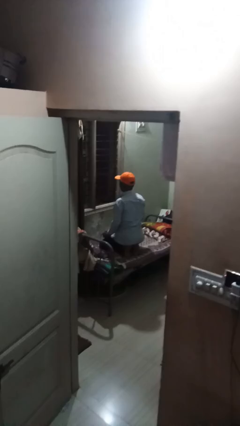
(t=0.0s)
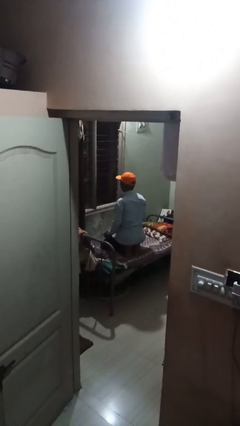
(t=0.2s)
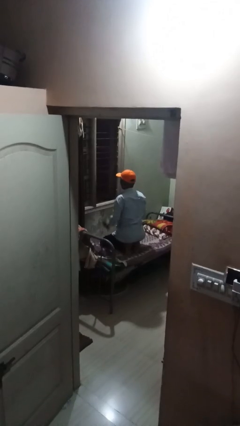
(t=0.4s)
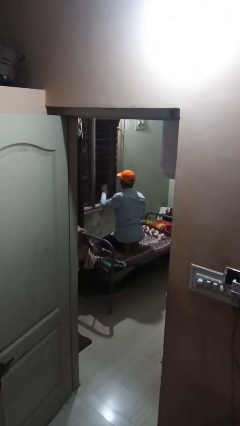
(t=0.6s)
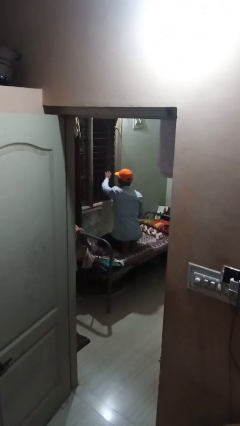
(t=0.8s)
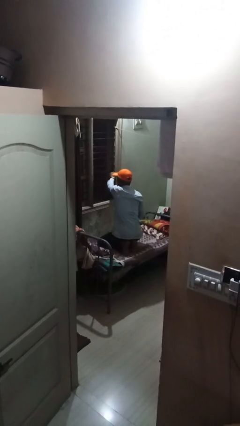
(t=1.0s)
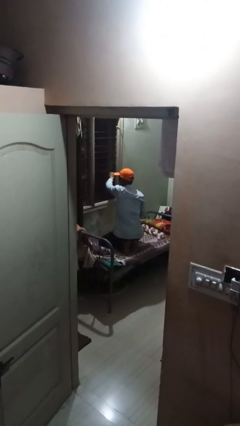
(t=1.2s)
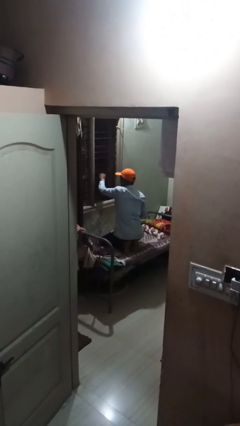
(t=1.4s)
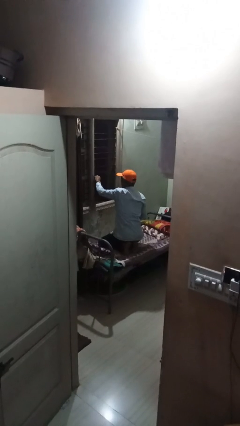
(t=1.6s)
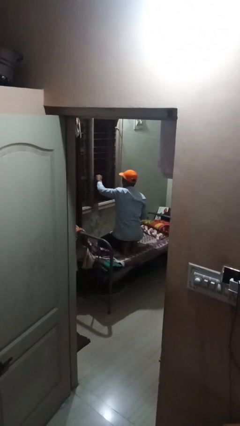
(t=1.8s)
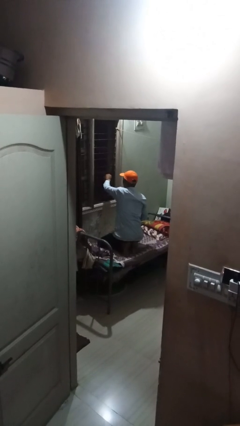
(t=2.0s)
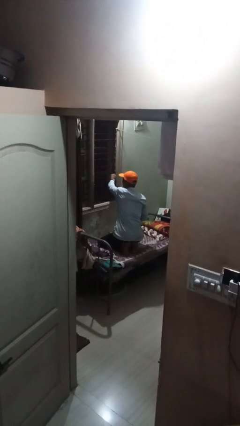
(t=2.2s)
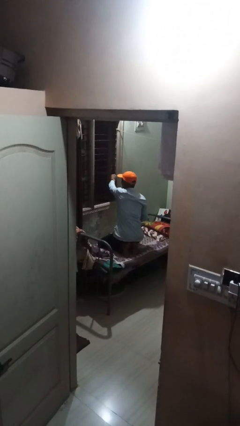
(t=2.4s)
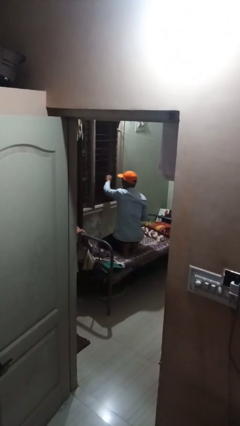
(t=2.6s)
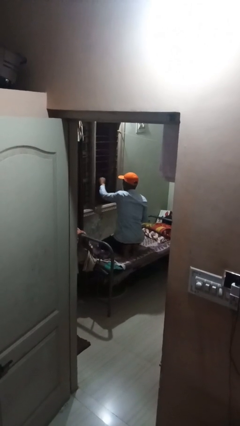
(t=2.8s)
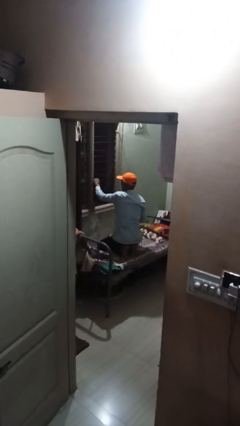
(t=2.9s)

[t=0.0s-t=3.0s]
person washes window

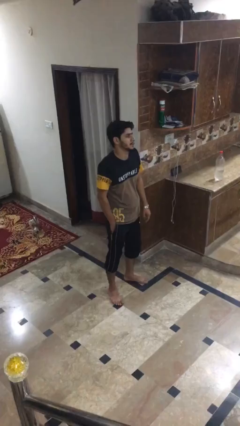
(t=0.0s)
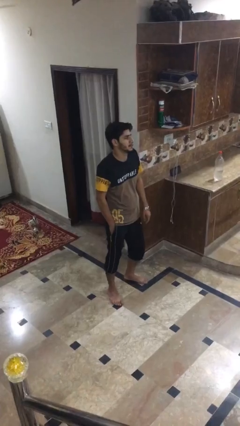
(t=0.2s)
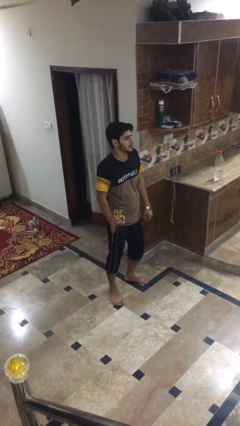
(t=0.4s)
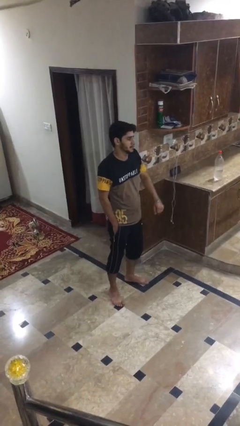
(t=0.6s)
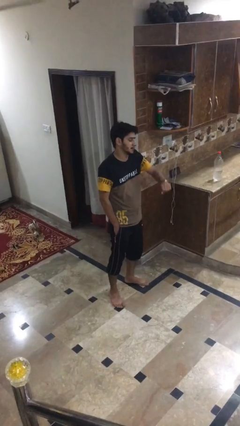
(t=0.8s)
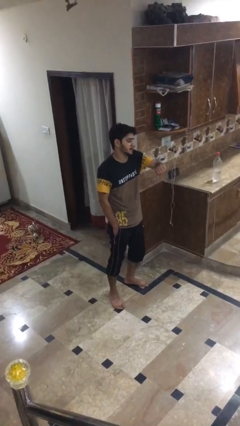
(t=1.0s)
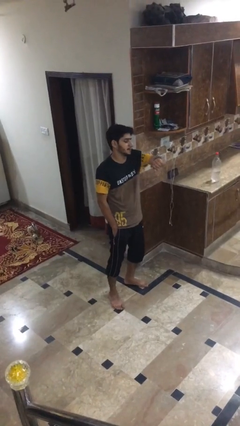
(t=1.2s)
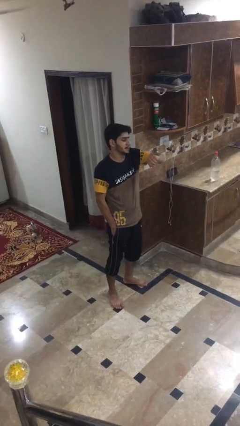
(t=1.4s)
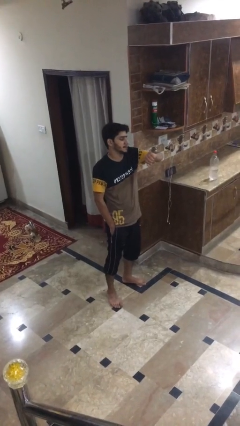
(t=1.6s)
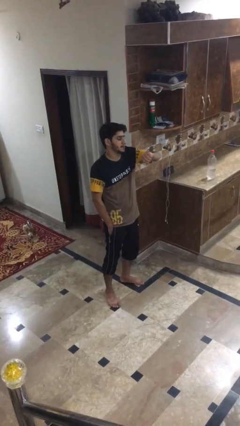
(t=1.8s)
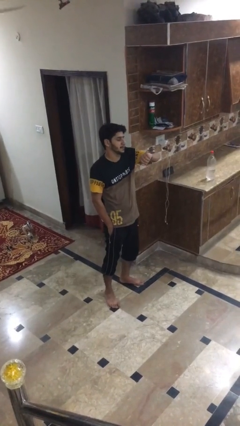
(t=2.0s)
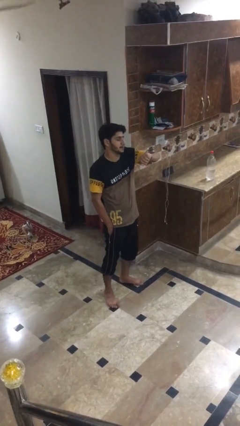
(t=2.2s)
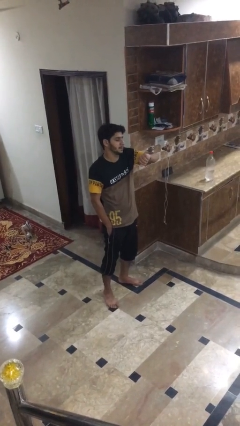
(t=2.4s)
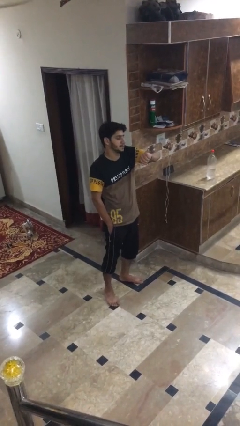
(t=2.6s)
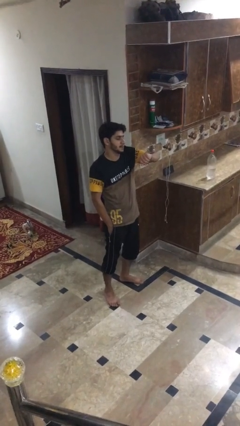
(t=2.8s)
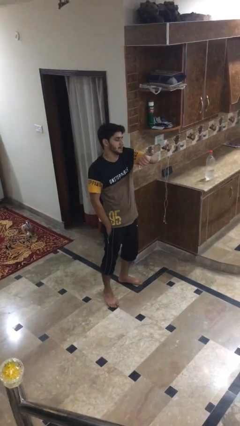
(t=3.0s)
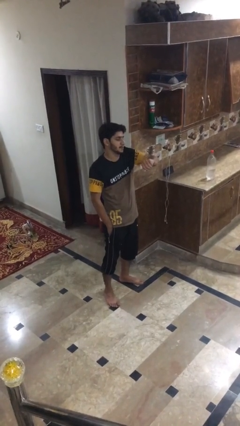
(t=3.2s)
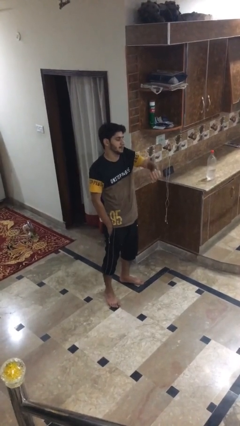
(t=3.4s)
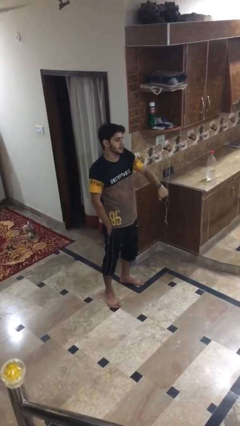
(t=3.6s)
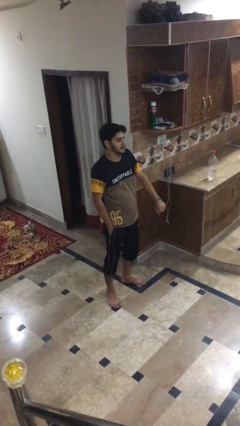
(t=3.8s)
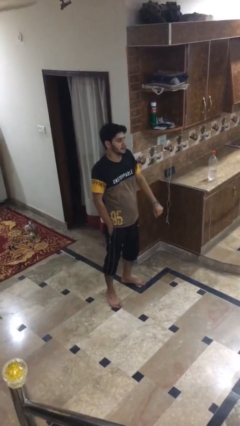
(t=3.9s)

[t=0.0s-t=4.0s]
person looks at wristwatch

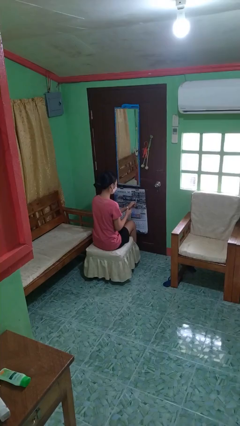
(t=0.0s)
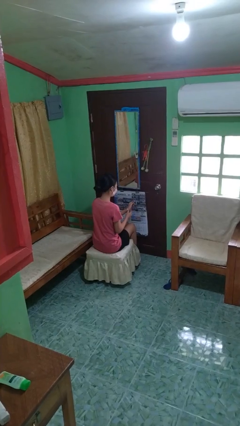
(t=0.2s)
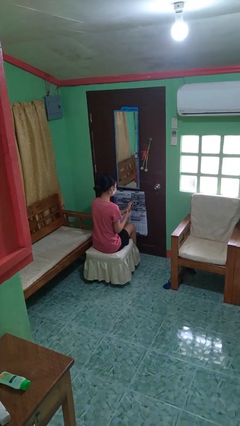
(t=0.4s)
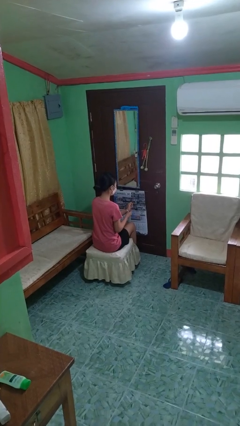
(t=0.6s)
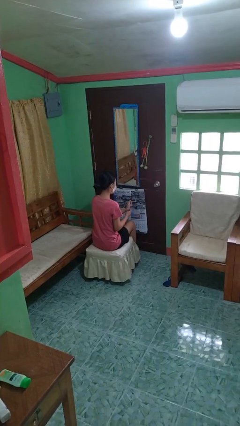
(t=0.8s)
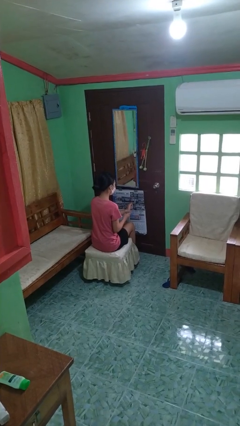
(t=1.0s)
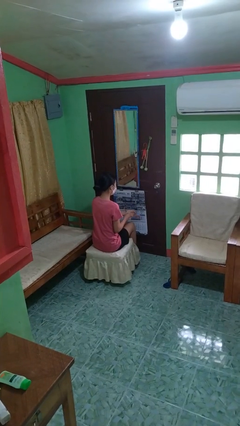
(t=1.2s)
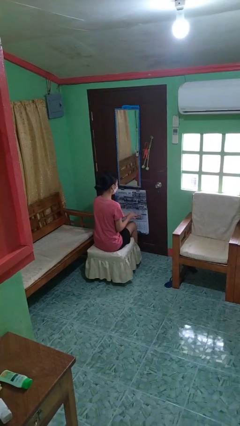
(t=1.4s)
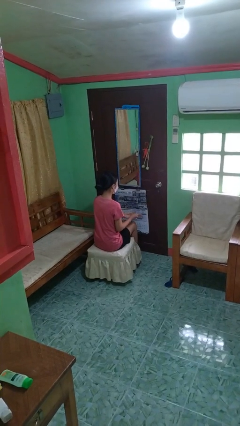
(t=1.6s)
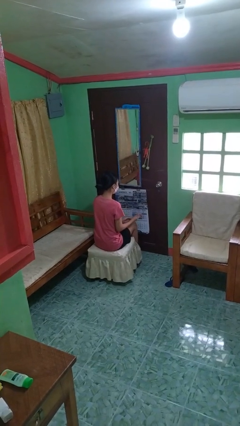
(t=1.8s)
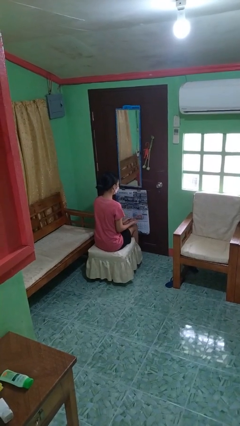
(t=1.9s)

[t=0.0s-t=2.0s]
person takes off wristwatch

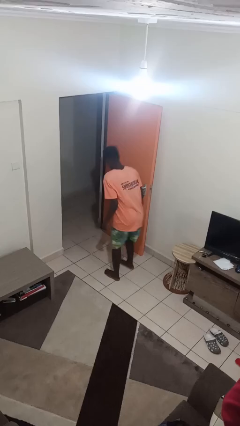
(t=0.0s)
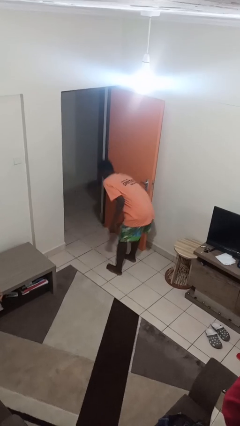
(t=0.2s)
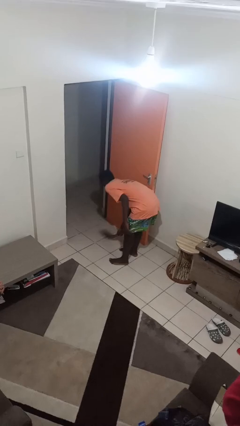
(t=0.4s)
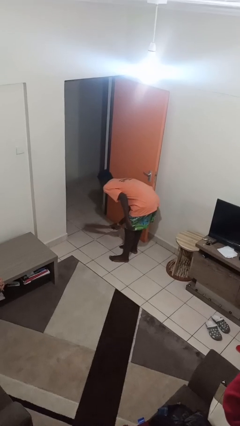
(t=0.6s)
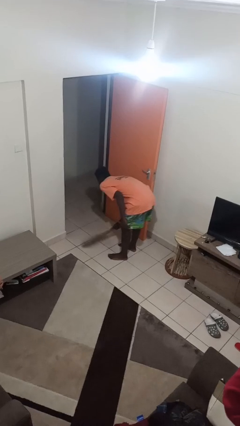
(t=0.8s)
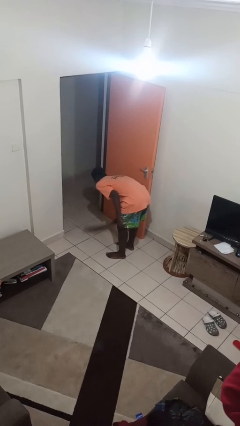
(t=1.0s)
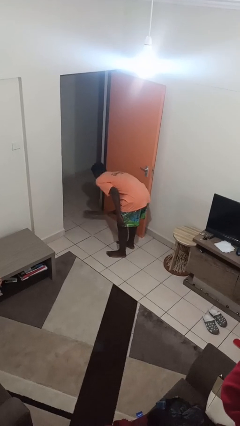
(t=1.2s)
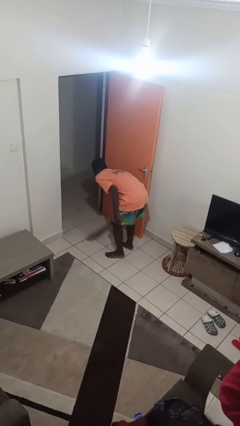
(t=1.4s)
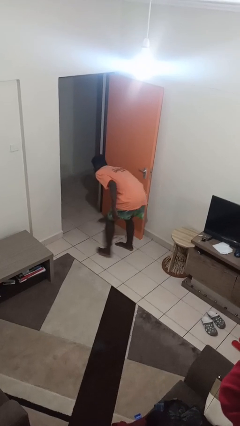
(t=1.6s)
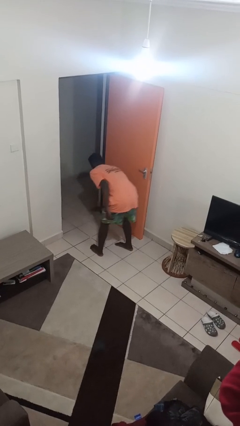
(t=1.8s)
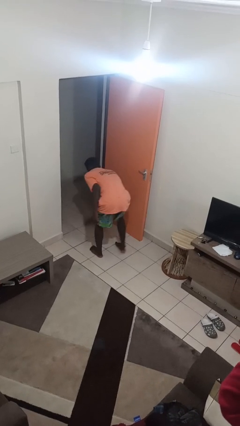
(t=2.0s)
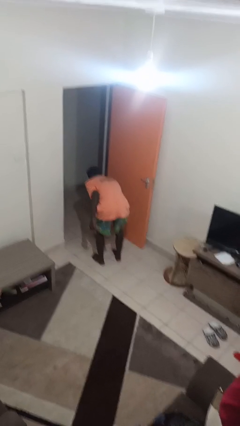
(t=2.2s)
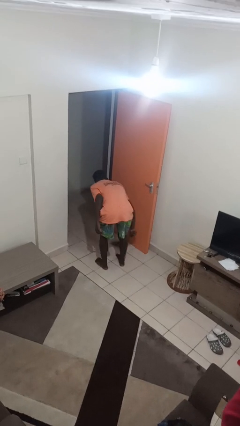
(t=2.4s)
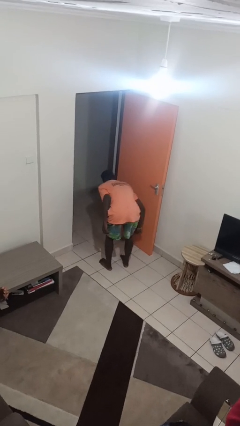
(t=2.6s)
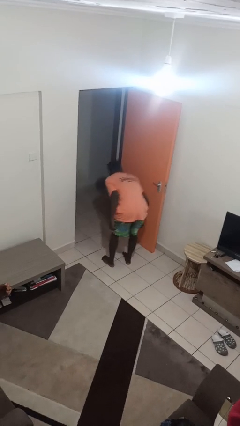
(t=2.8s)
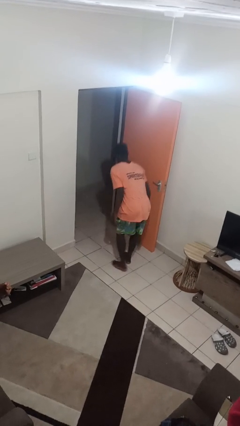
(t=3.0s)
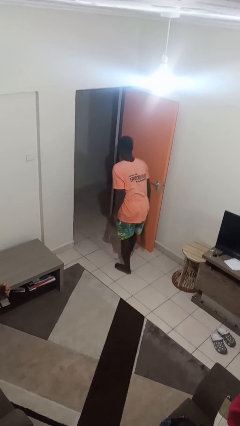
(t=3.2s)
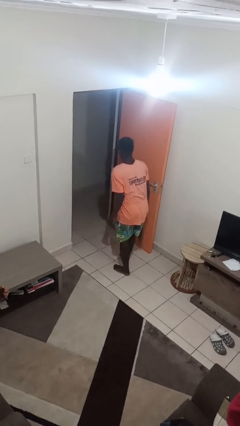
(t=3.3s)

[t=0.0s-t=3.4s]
person sweeps floor

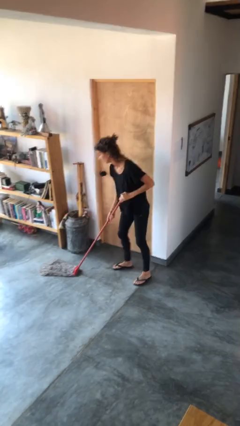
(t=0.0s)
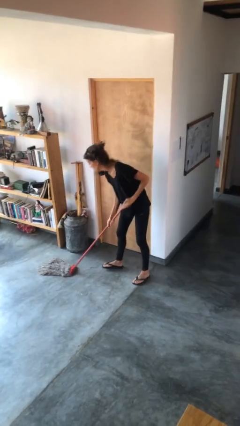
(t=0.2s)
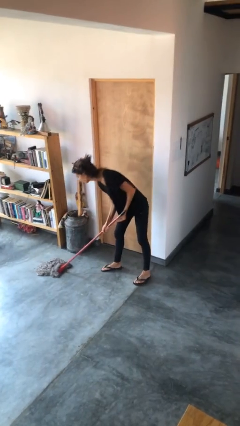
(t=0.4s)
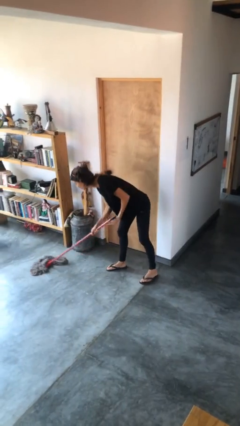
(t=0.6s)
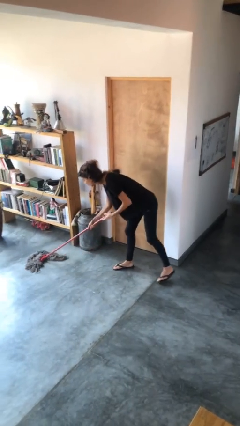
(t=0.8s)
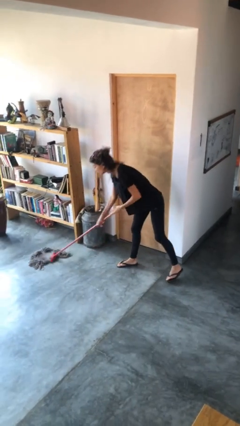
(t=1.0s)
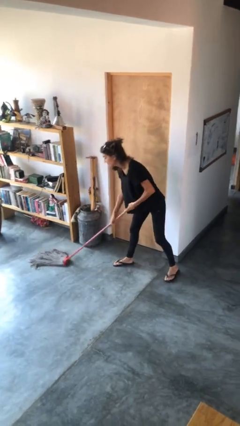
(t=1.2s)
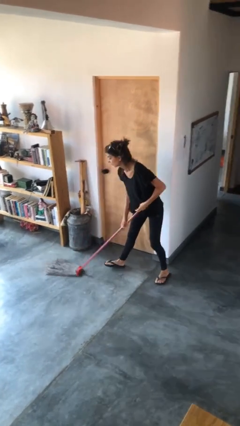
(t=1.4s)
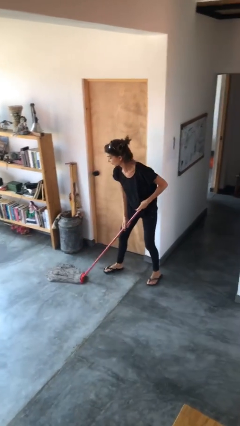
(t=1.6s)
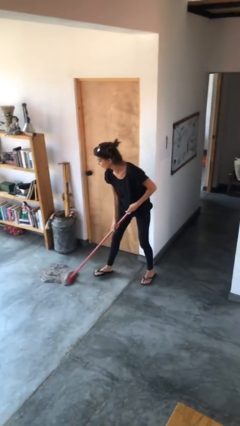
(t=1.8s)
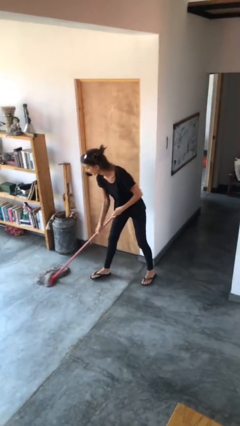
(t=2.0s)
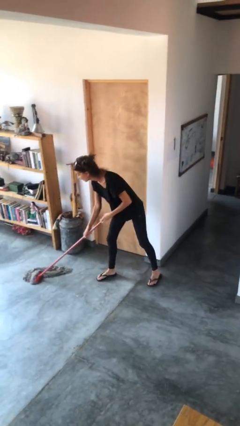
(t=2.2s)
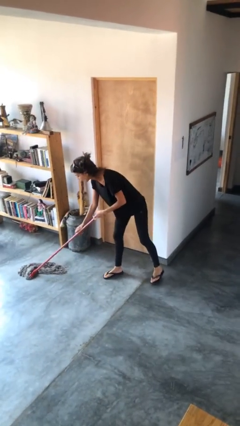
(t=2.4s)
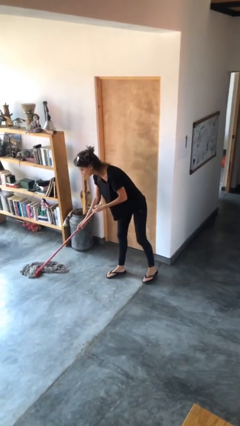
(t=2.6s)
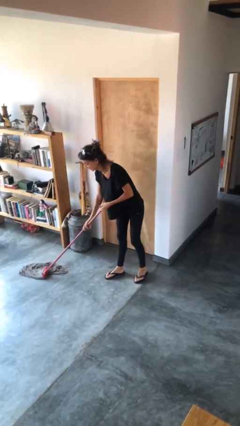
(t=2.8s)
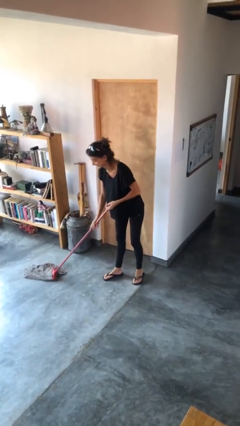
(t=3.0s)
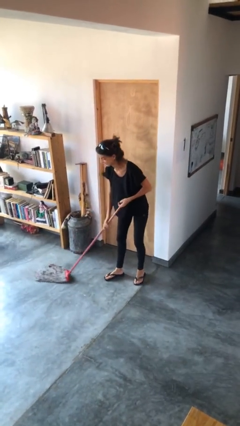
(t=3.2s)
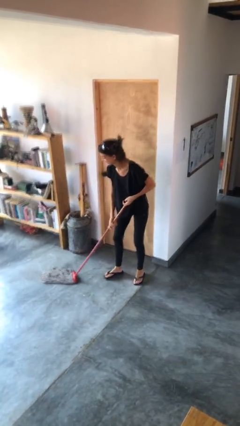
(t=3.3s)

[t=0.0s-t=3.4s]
person mops

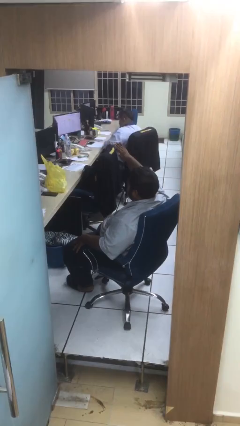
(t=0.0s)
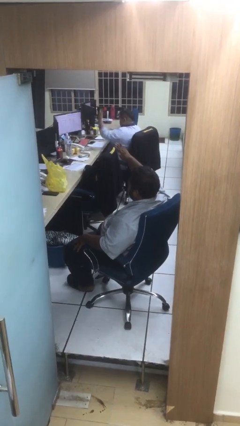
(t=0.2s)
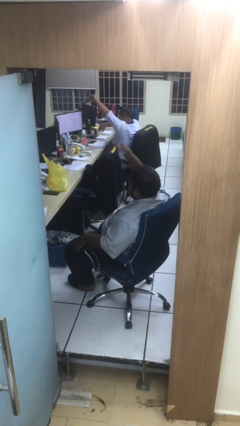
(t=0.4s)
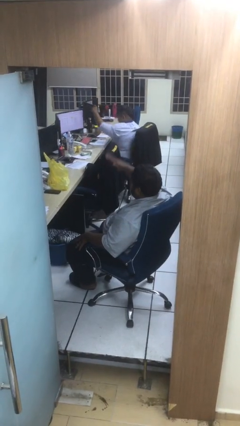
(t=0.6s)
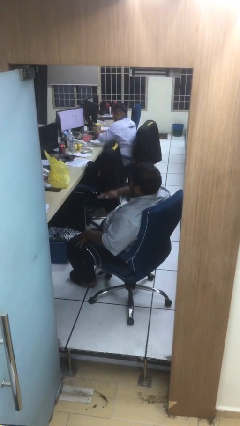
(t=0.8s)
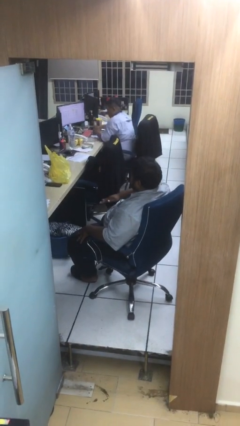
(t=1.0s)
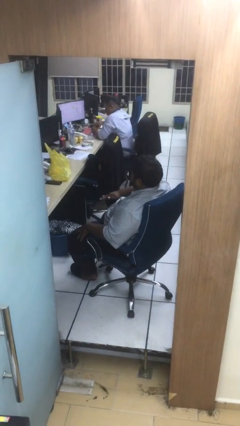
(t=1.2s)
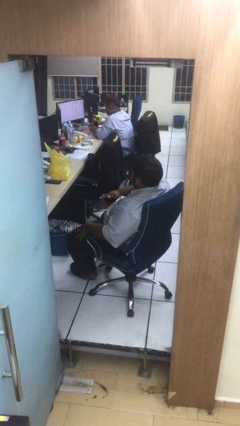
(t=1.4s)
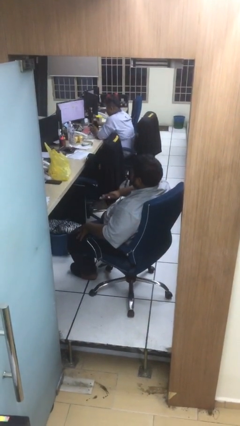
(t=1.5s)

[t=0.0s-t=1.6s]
person gestures swipe down
